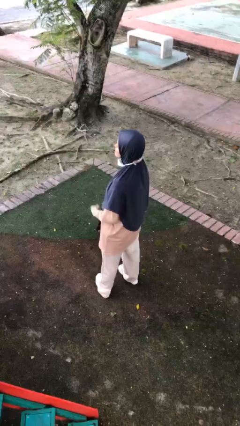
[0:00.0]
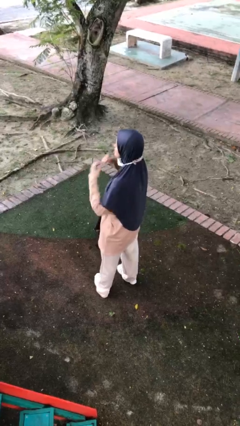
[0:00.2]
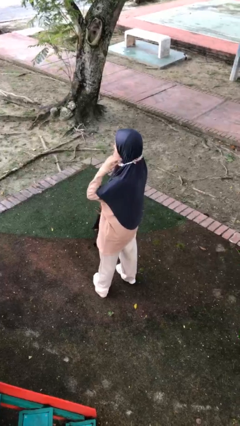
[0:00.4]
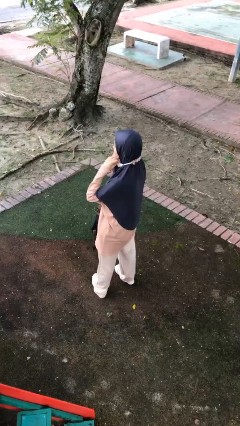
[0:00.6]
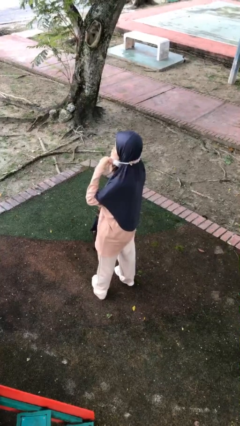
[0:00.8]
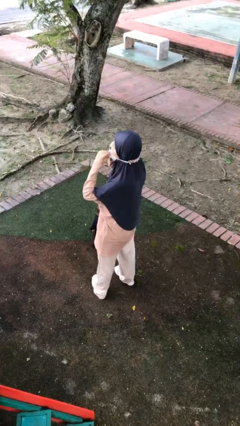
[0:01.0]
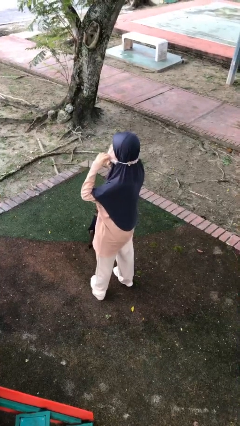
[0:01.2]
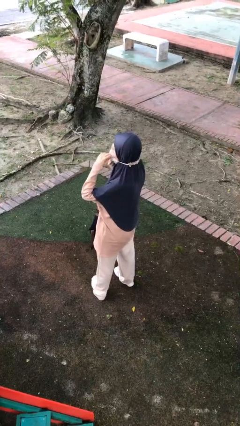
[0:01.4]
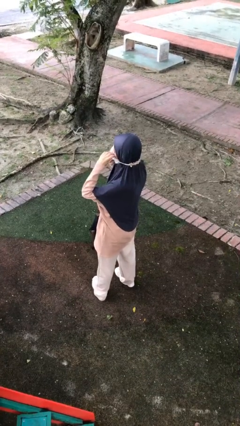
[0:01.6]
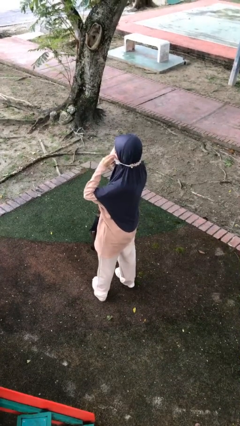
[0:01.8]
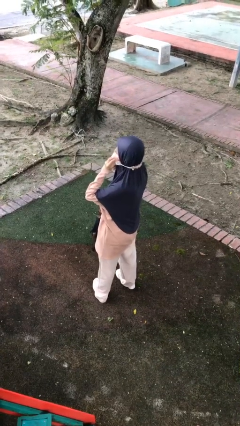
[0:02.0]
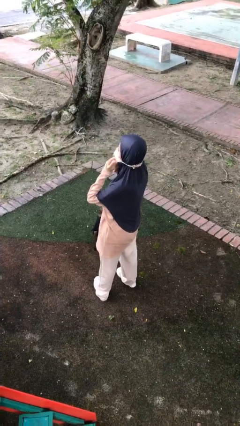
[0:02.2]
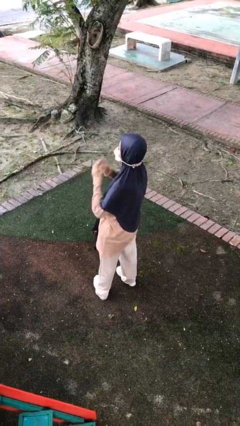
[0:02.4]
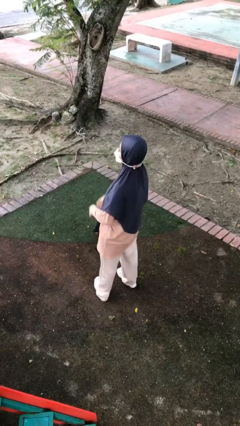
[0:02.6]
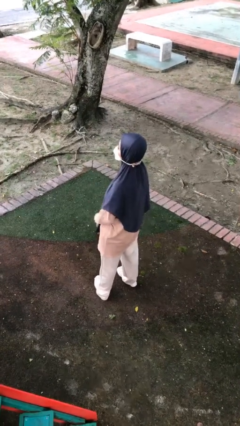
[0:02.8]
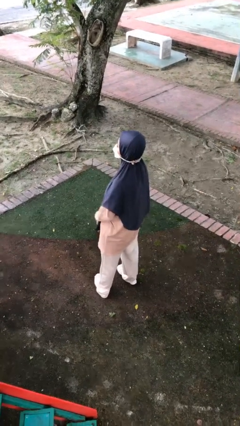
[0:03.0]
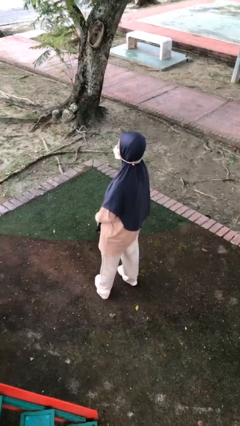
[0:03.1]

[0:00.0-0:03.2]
person puts on facemask

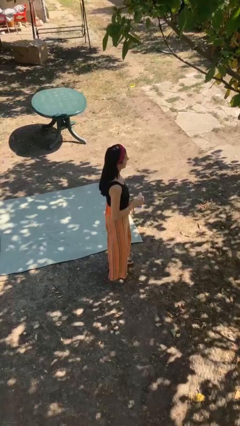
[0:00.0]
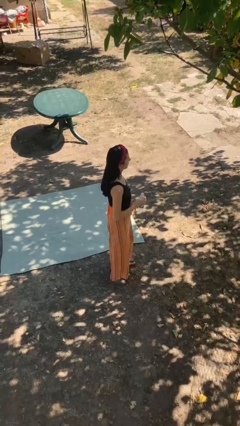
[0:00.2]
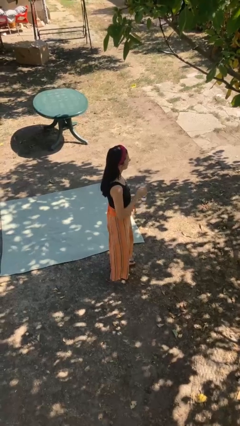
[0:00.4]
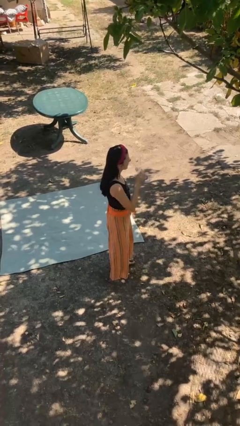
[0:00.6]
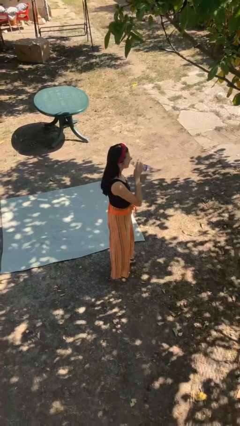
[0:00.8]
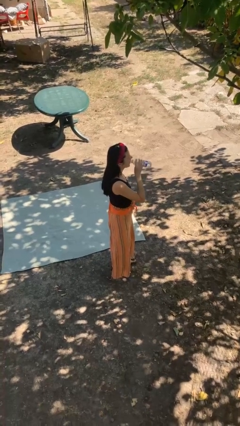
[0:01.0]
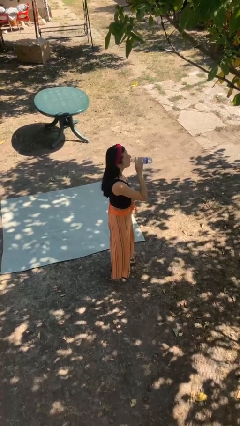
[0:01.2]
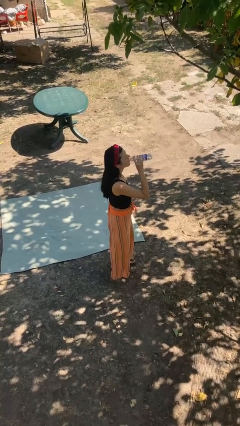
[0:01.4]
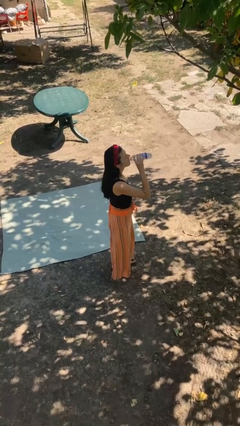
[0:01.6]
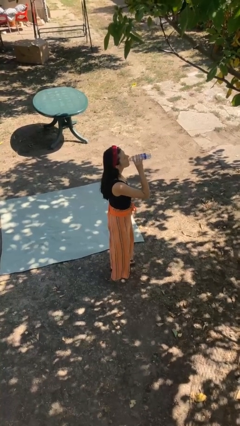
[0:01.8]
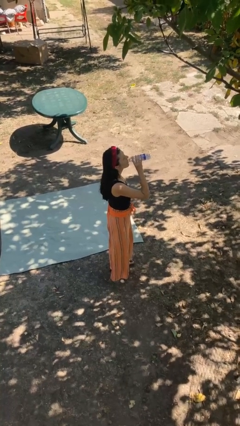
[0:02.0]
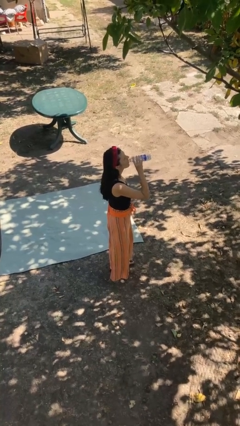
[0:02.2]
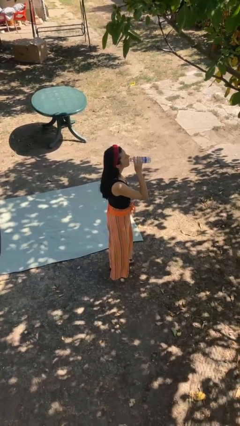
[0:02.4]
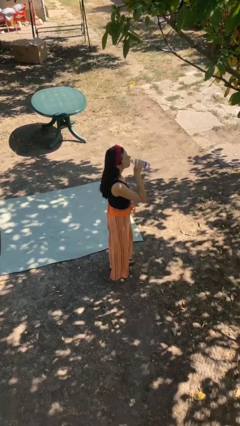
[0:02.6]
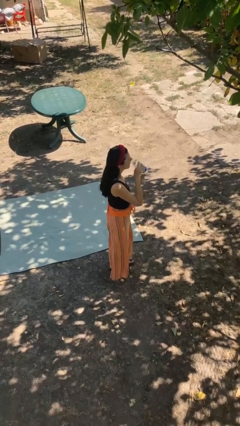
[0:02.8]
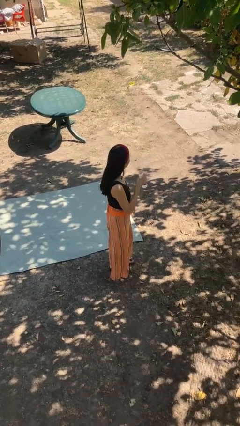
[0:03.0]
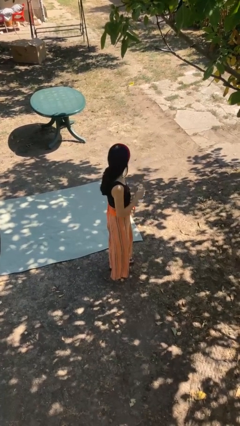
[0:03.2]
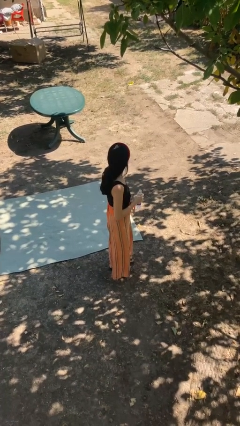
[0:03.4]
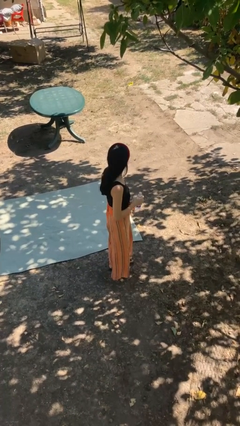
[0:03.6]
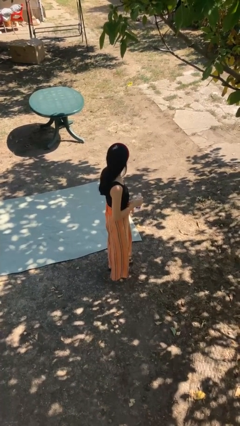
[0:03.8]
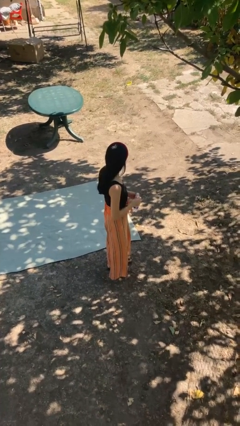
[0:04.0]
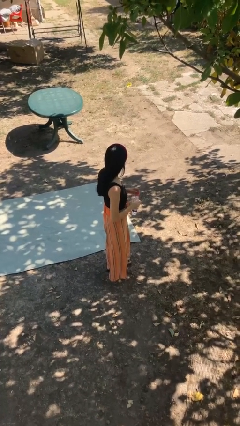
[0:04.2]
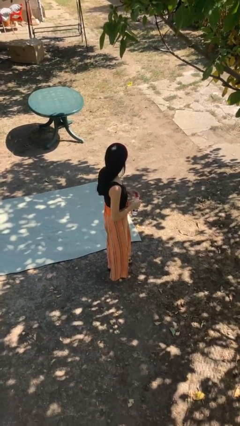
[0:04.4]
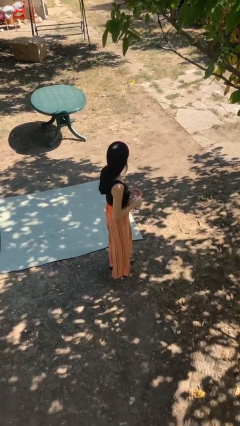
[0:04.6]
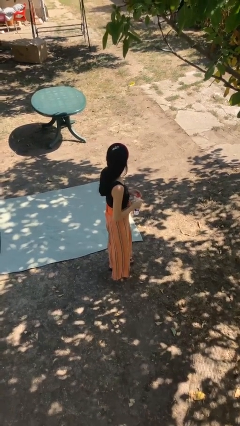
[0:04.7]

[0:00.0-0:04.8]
person drinks from bottle

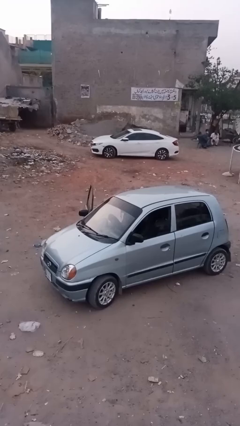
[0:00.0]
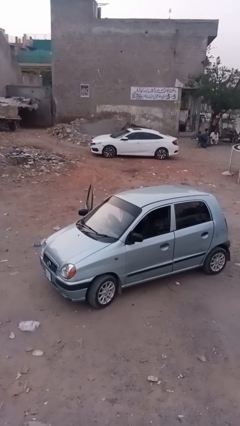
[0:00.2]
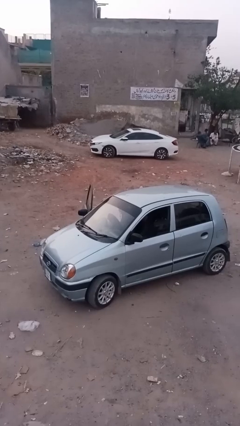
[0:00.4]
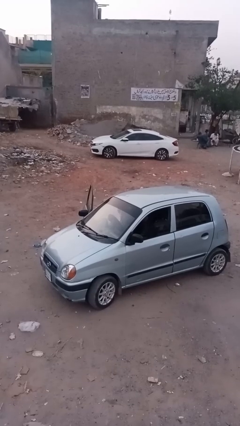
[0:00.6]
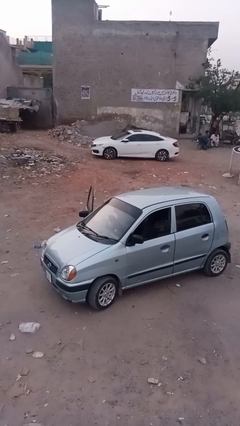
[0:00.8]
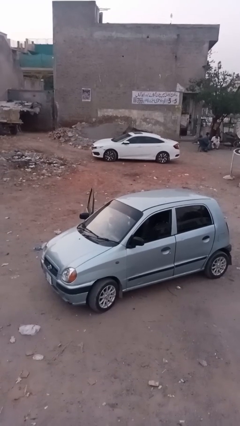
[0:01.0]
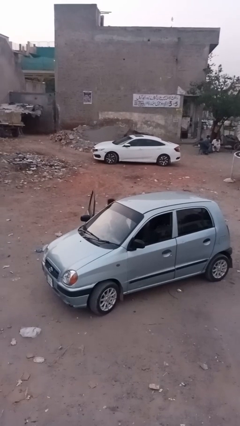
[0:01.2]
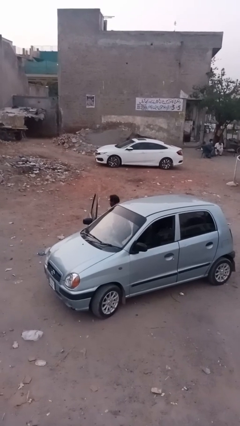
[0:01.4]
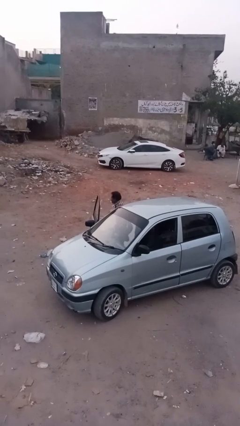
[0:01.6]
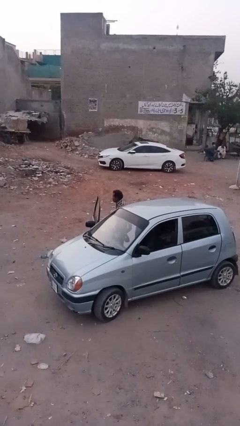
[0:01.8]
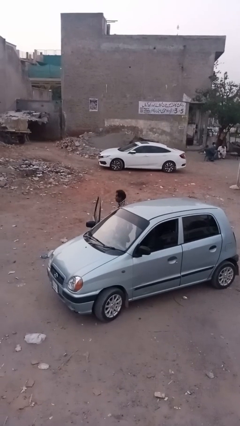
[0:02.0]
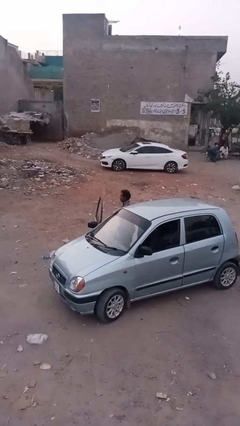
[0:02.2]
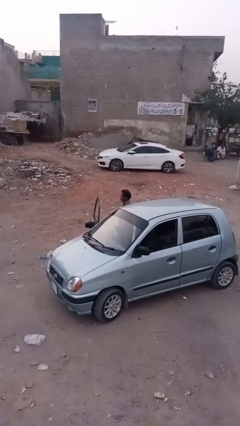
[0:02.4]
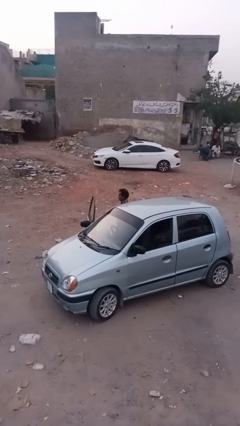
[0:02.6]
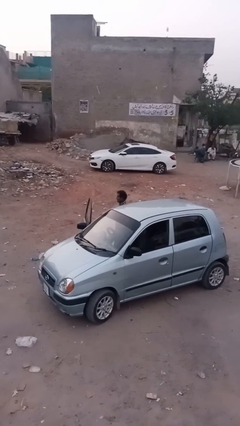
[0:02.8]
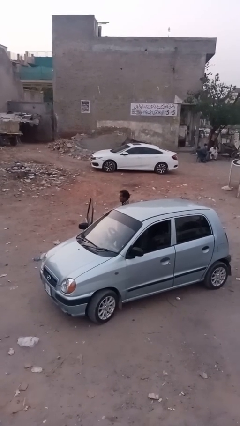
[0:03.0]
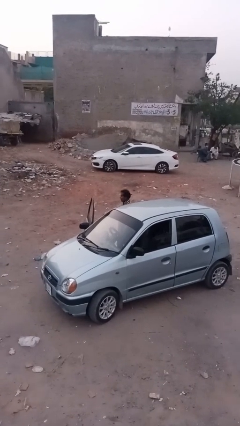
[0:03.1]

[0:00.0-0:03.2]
person exits car

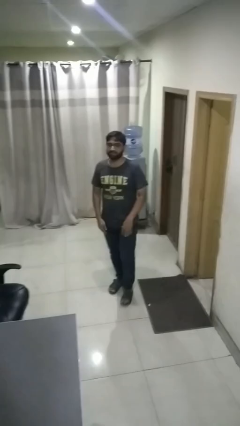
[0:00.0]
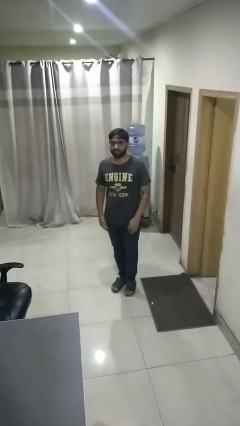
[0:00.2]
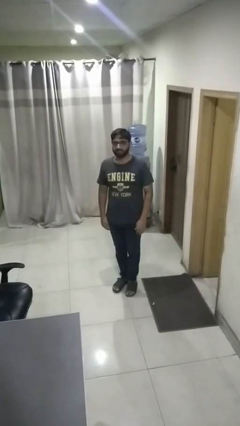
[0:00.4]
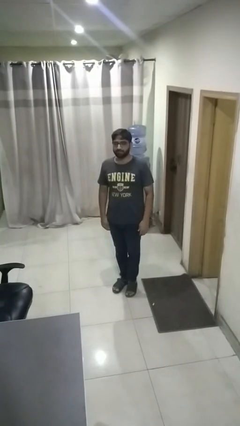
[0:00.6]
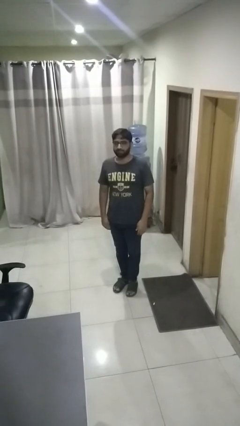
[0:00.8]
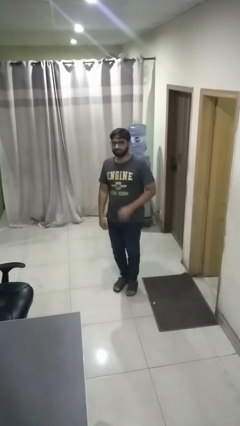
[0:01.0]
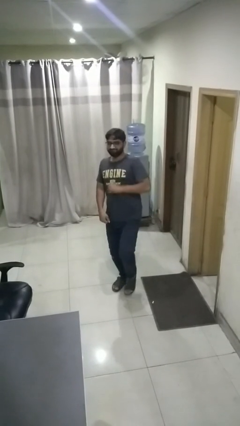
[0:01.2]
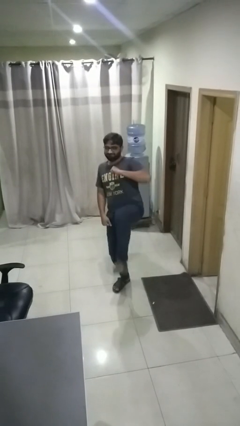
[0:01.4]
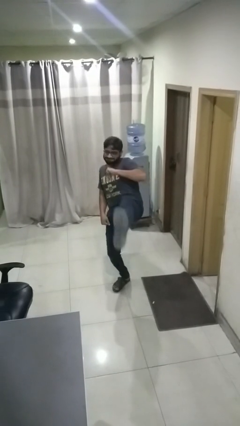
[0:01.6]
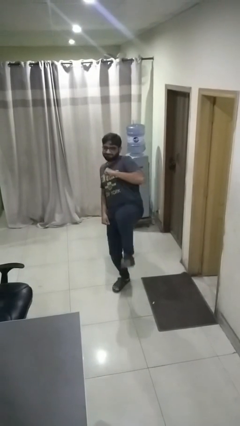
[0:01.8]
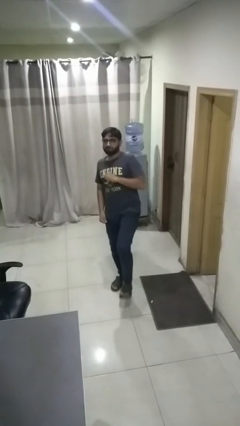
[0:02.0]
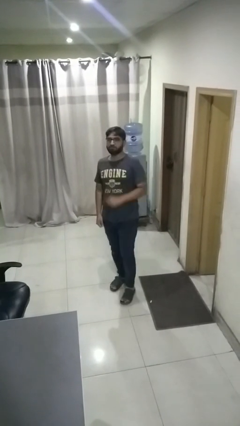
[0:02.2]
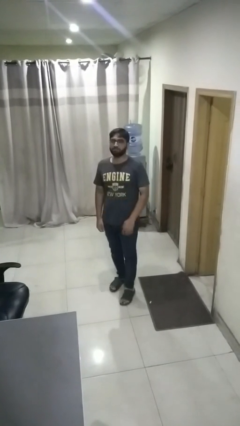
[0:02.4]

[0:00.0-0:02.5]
person karate kicks

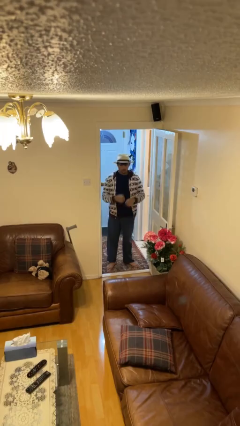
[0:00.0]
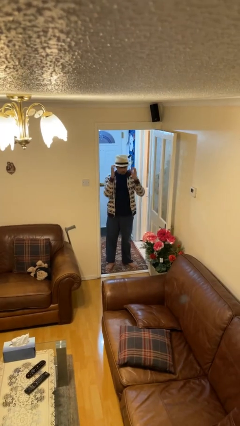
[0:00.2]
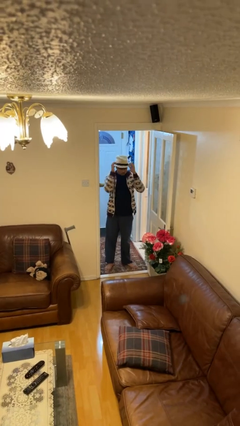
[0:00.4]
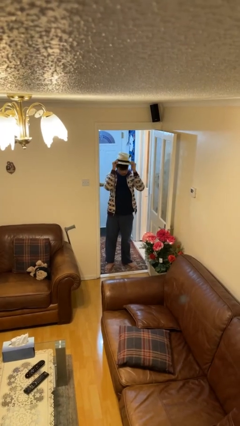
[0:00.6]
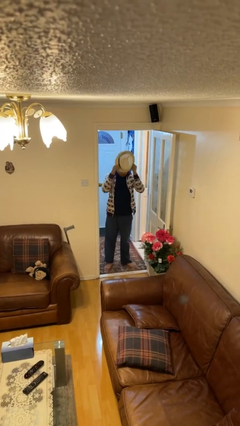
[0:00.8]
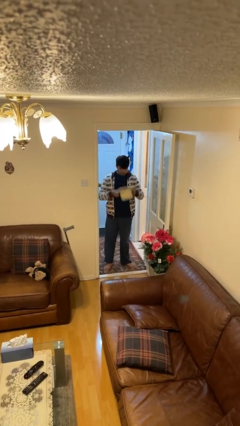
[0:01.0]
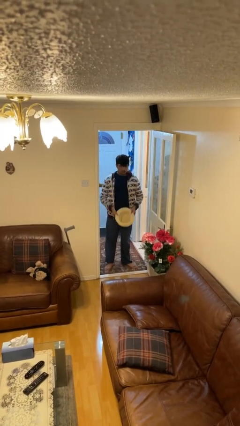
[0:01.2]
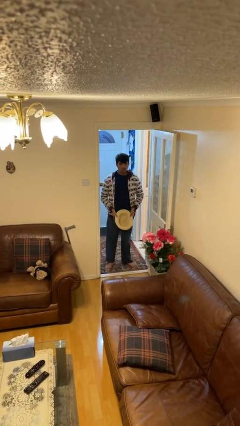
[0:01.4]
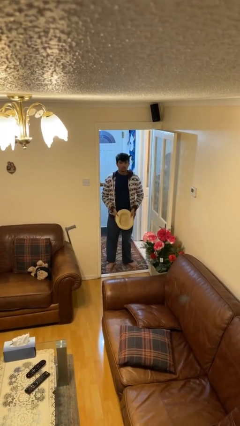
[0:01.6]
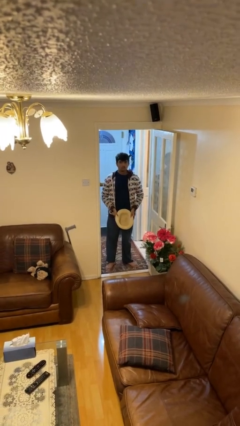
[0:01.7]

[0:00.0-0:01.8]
person takes off hat

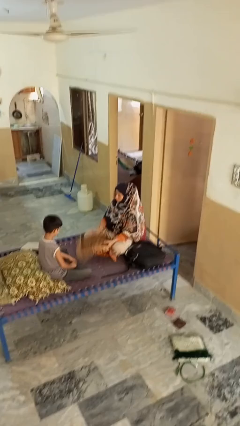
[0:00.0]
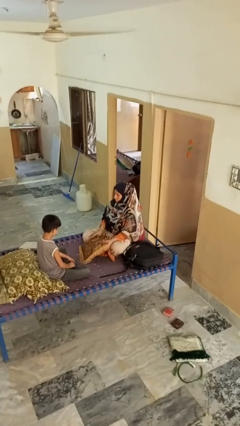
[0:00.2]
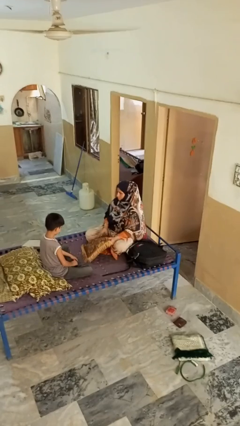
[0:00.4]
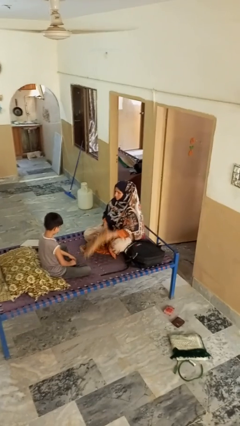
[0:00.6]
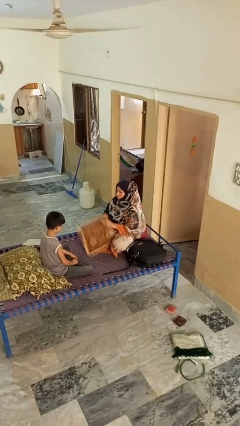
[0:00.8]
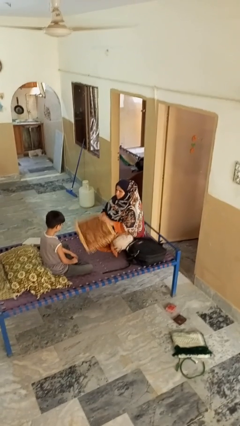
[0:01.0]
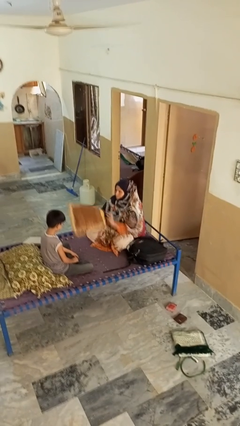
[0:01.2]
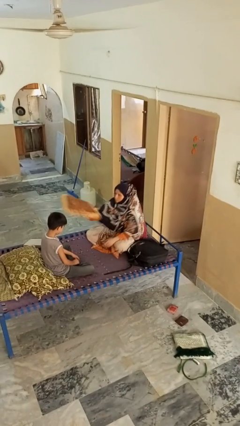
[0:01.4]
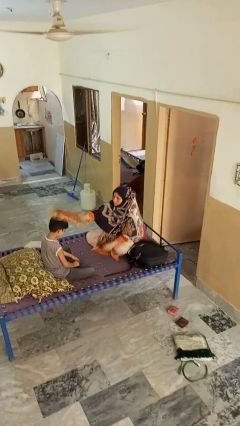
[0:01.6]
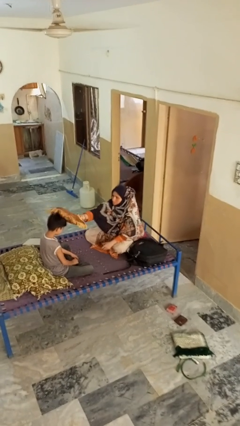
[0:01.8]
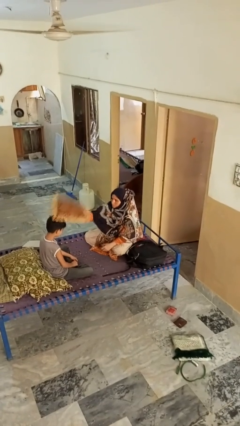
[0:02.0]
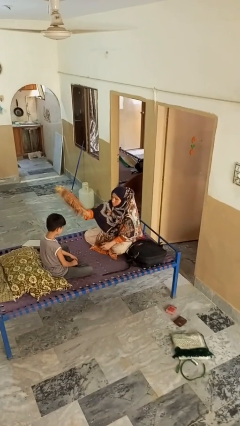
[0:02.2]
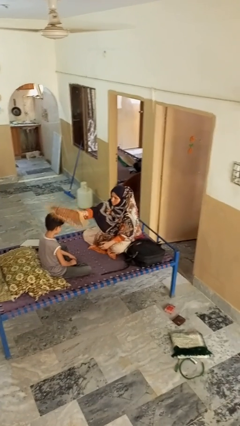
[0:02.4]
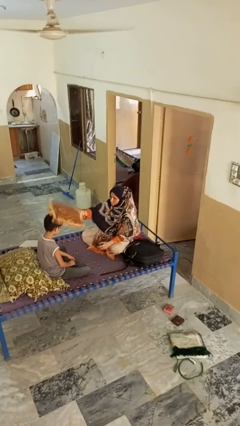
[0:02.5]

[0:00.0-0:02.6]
person hits person with pillow
